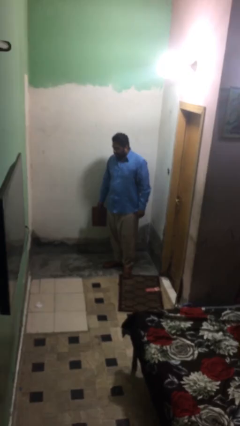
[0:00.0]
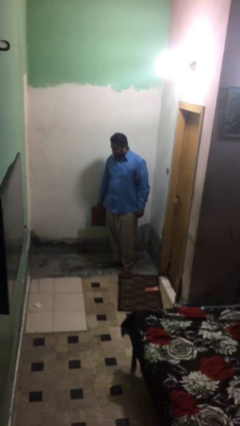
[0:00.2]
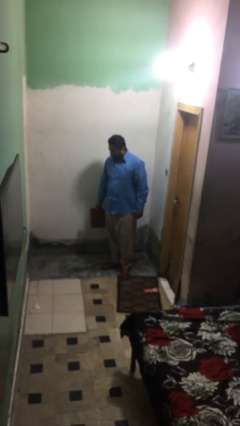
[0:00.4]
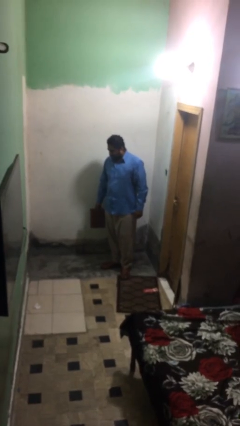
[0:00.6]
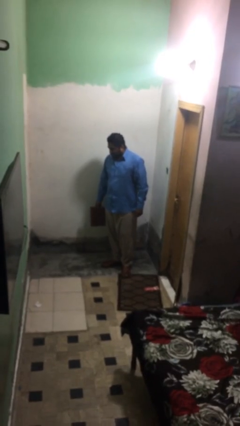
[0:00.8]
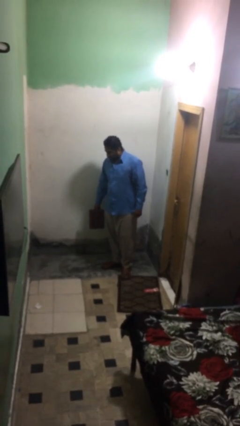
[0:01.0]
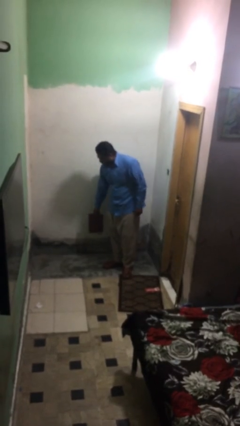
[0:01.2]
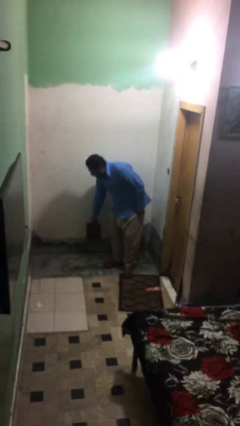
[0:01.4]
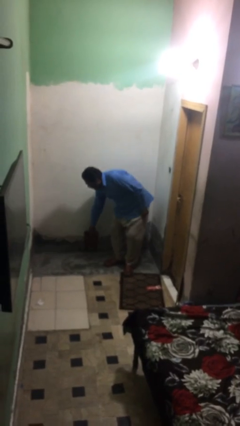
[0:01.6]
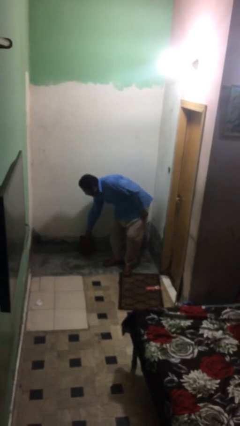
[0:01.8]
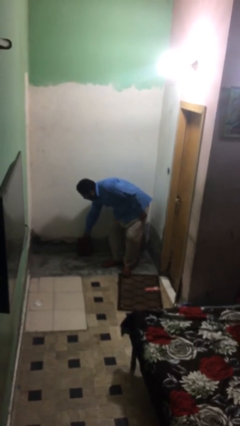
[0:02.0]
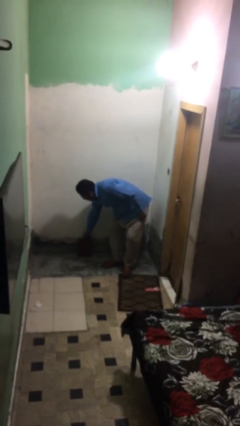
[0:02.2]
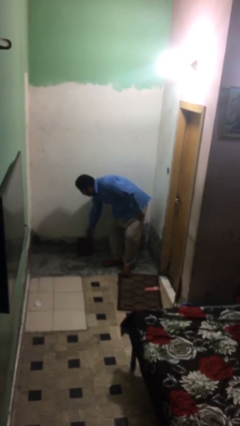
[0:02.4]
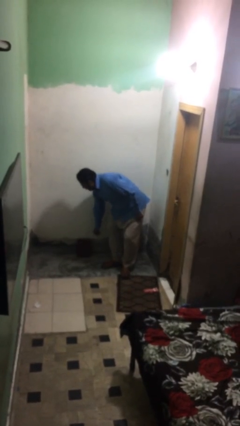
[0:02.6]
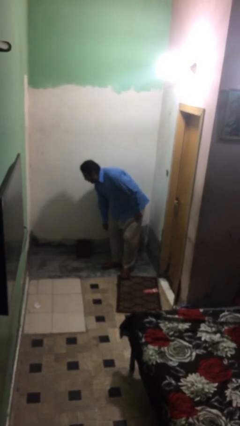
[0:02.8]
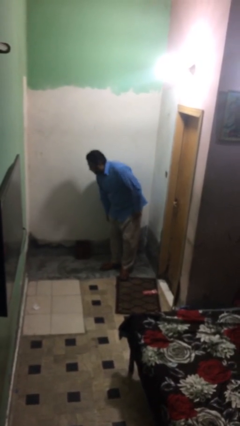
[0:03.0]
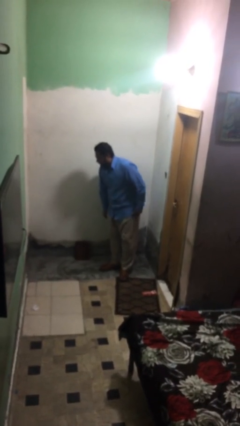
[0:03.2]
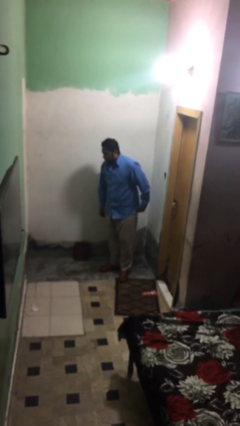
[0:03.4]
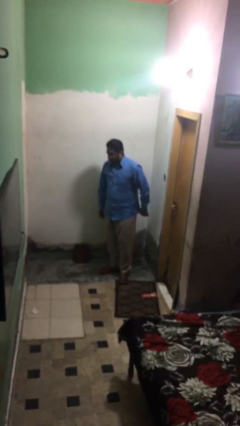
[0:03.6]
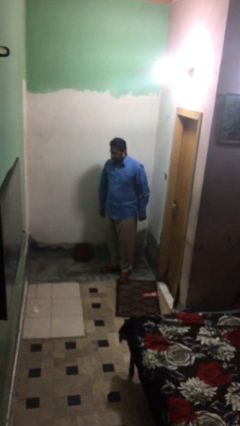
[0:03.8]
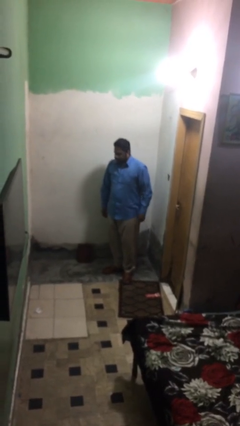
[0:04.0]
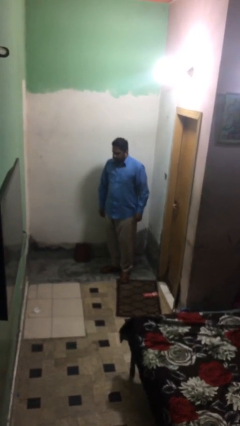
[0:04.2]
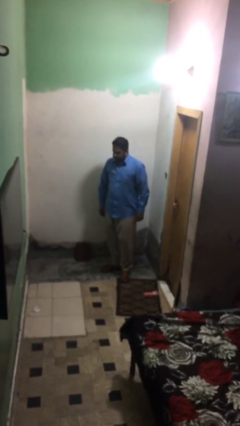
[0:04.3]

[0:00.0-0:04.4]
person puts down object on floor

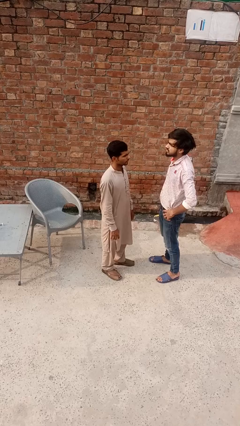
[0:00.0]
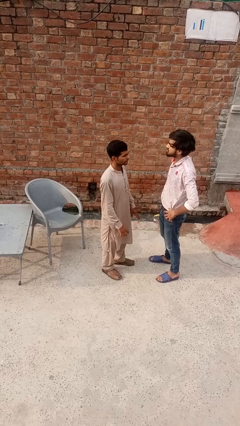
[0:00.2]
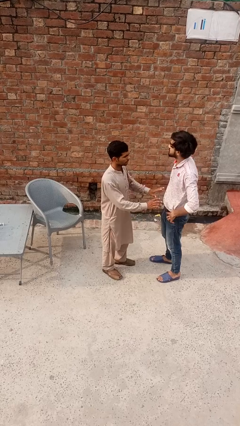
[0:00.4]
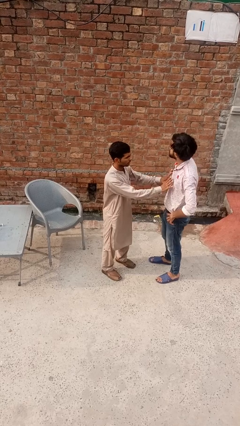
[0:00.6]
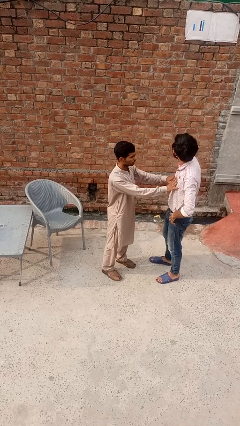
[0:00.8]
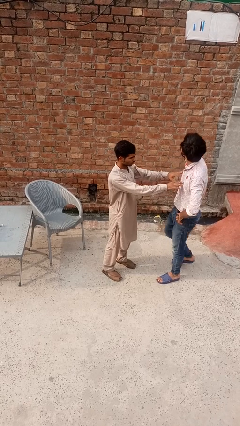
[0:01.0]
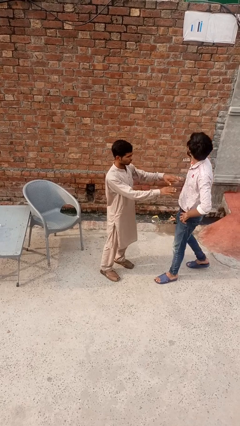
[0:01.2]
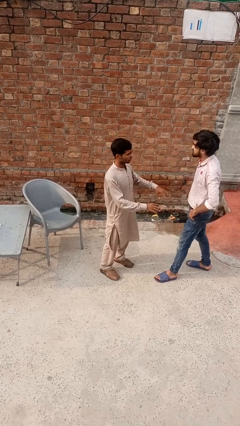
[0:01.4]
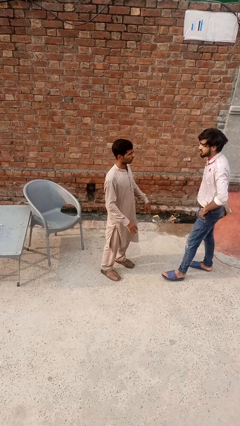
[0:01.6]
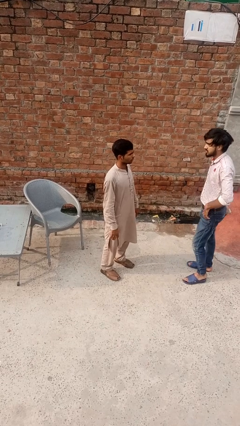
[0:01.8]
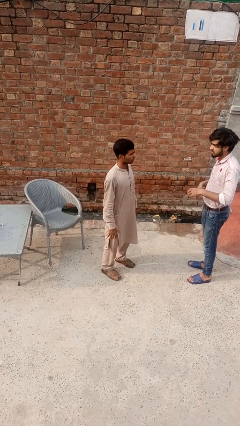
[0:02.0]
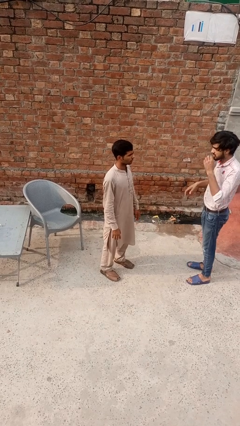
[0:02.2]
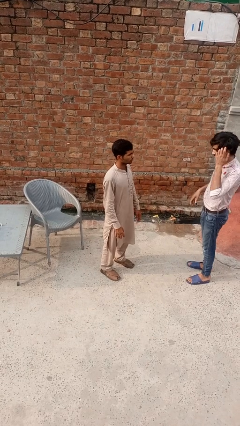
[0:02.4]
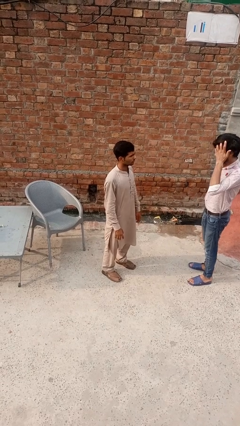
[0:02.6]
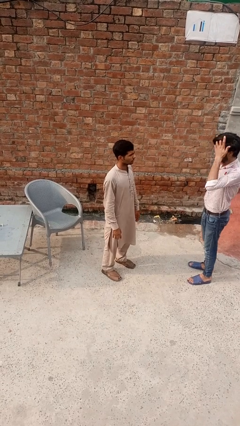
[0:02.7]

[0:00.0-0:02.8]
person grabs person by forearm

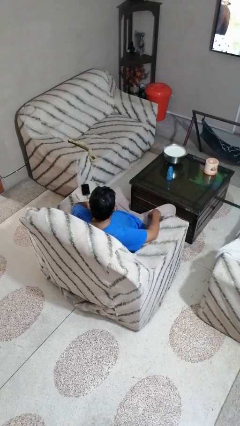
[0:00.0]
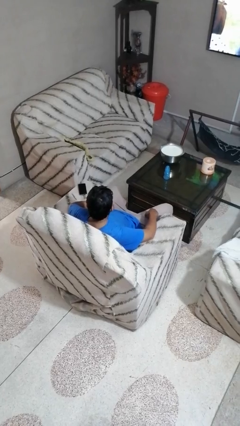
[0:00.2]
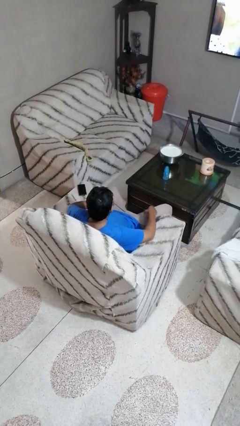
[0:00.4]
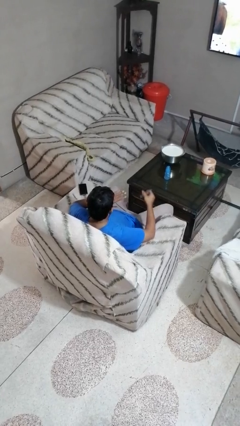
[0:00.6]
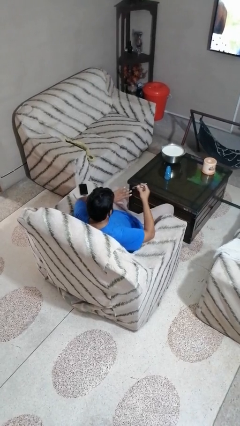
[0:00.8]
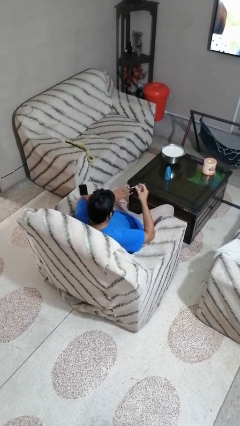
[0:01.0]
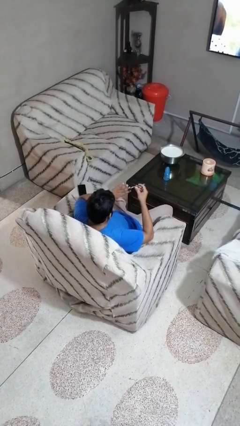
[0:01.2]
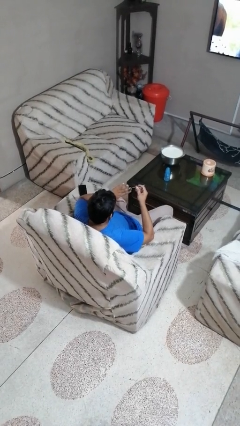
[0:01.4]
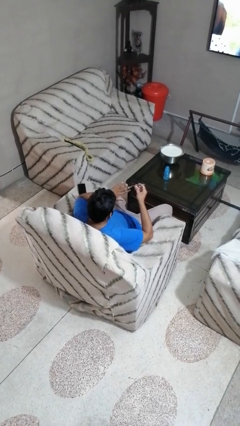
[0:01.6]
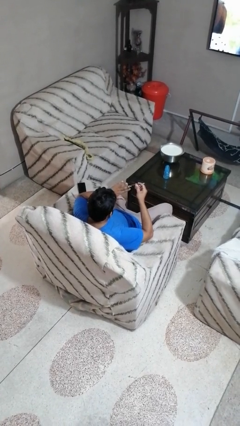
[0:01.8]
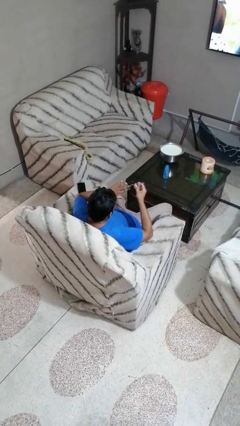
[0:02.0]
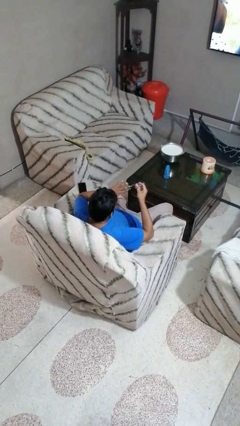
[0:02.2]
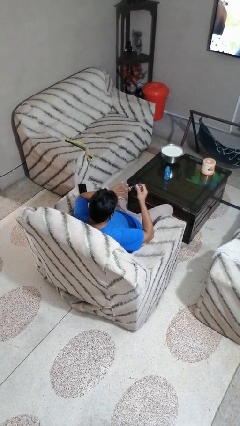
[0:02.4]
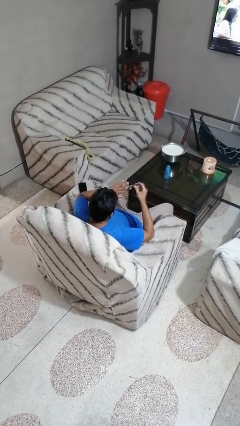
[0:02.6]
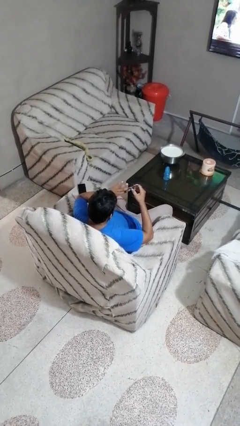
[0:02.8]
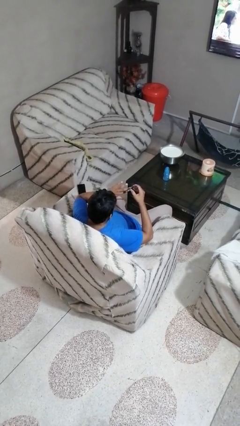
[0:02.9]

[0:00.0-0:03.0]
person clips fingernails

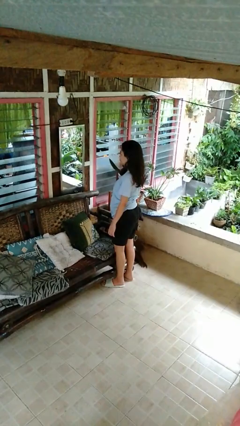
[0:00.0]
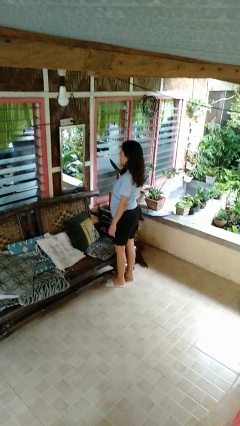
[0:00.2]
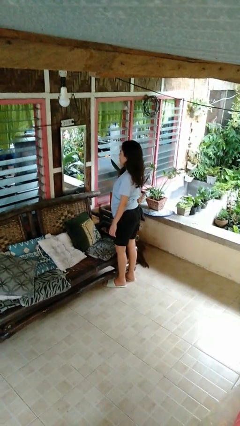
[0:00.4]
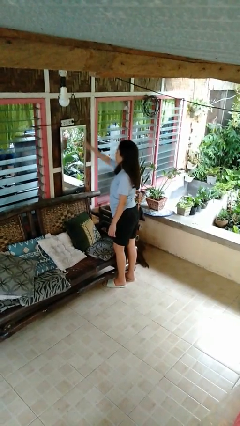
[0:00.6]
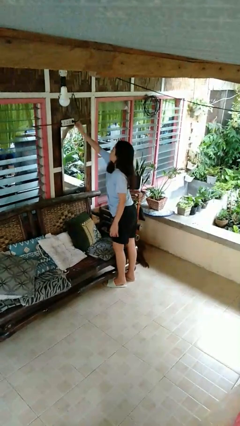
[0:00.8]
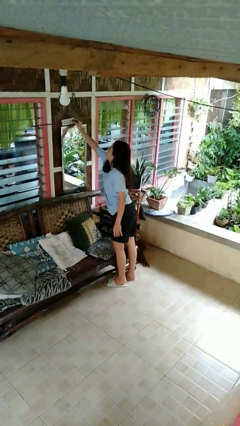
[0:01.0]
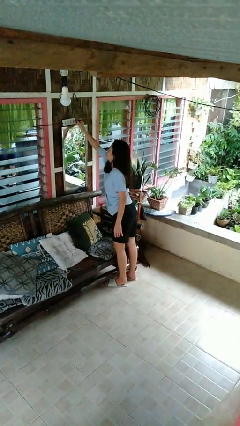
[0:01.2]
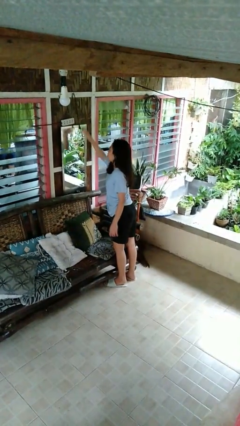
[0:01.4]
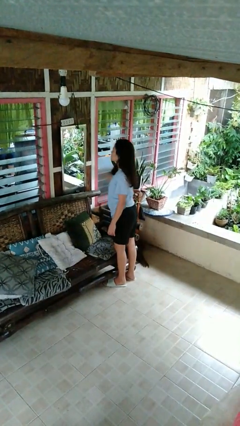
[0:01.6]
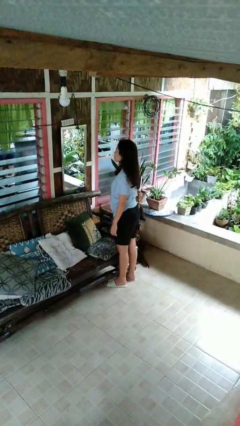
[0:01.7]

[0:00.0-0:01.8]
person unplugs from electrical socket

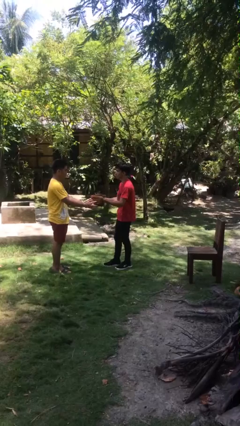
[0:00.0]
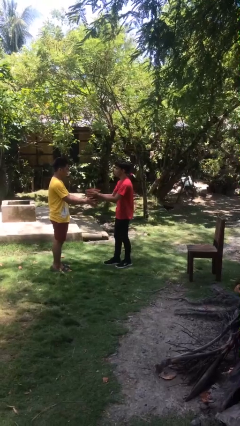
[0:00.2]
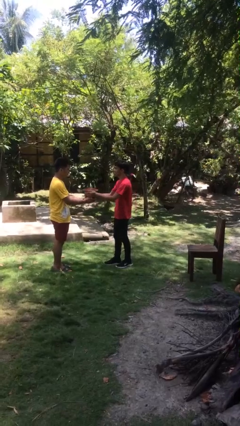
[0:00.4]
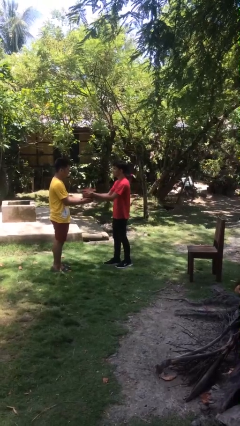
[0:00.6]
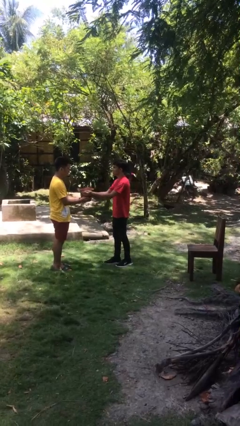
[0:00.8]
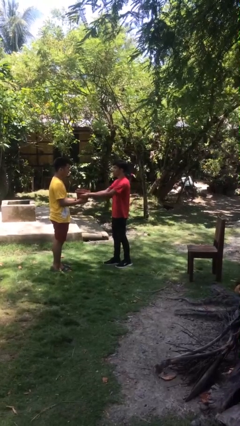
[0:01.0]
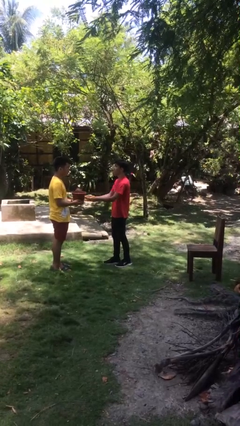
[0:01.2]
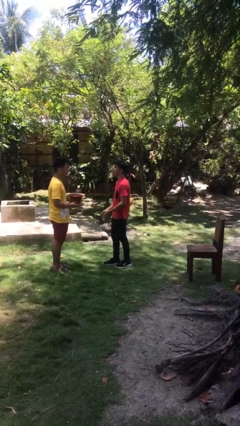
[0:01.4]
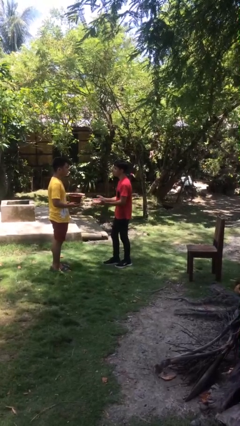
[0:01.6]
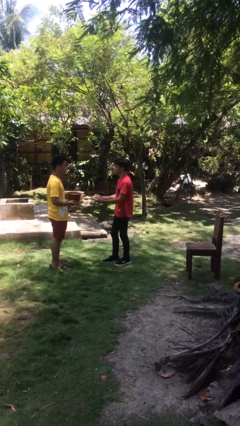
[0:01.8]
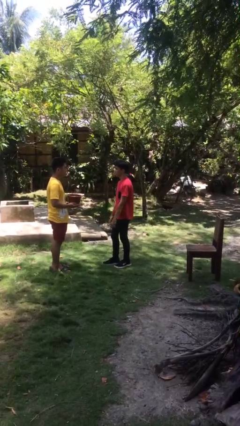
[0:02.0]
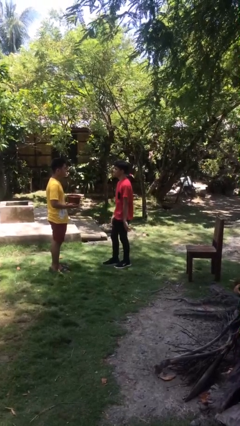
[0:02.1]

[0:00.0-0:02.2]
person transfers object to person

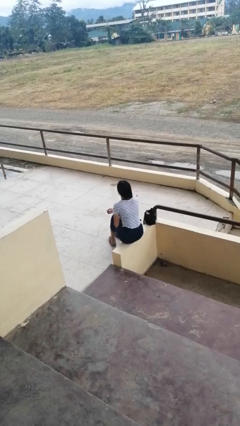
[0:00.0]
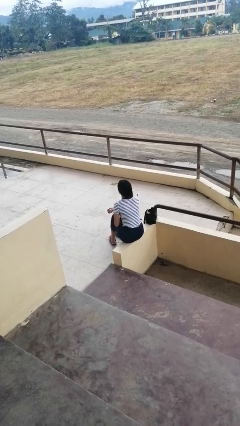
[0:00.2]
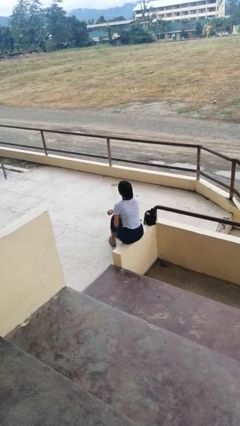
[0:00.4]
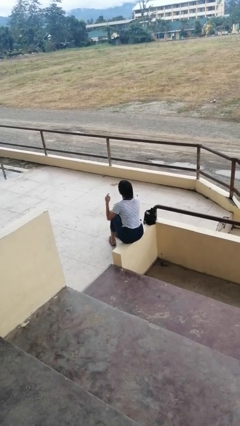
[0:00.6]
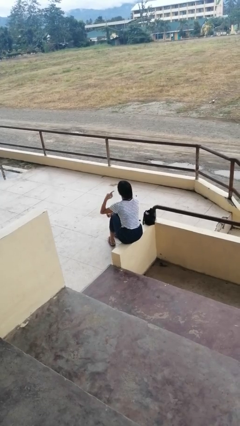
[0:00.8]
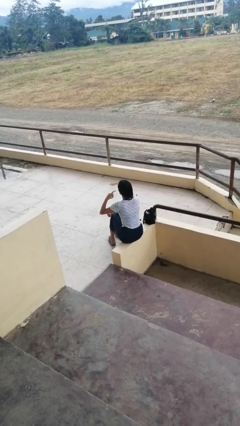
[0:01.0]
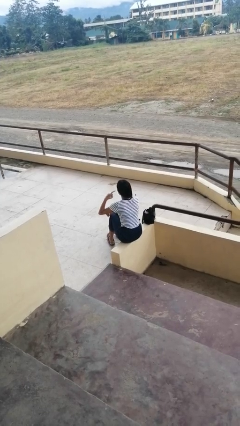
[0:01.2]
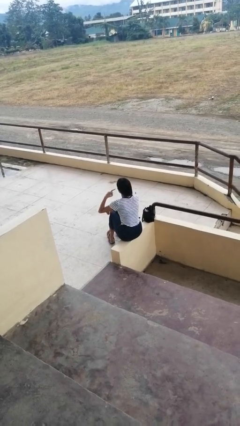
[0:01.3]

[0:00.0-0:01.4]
person gestures listen closely

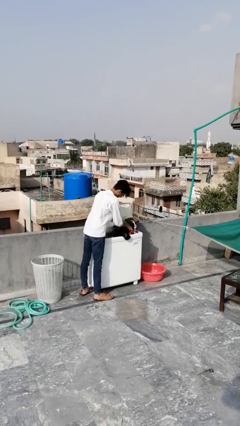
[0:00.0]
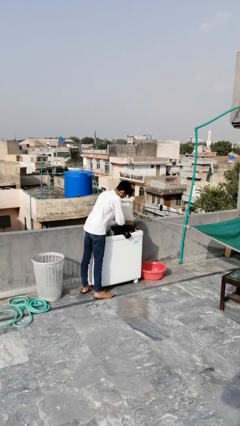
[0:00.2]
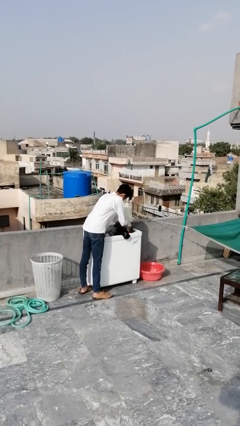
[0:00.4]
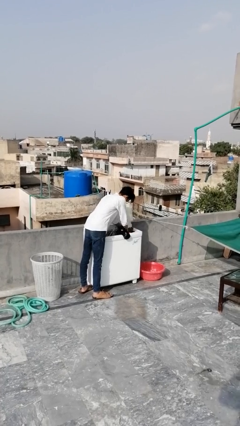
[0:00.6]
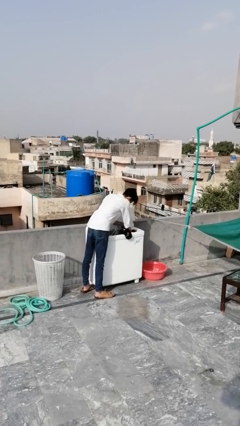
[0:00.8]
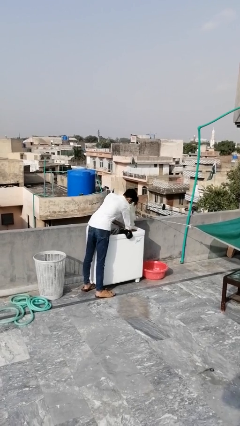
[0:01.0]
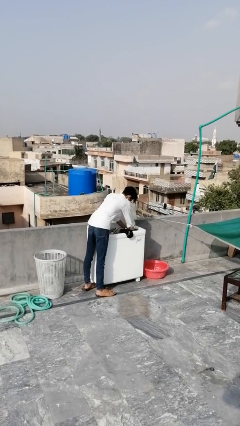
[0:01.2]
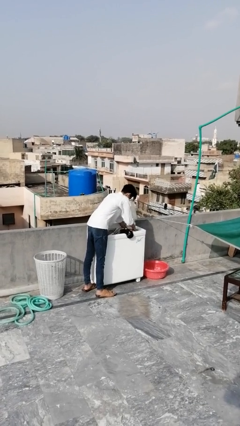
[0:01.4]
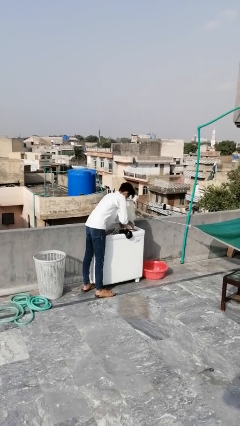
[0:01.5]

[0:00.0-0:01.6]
person loads dryer
